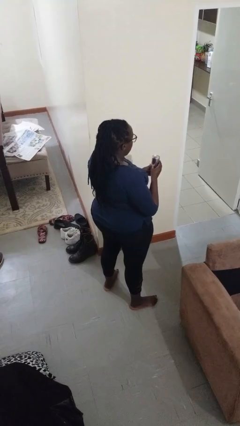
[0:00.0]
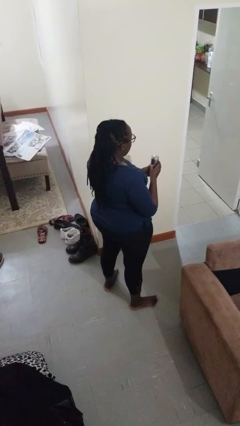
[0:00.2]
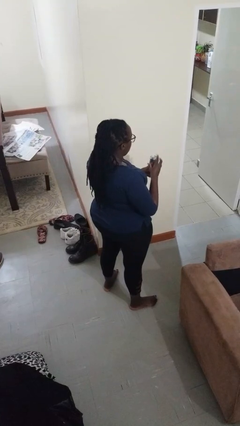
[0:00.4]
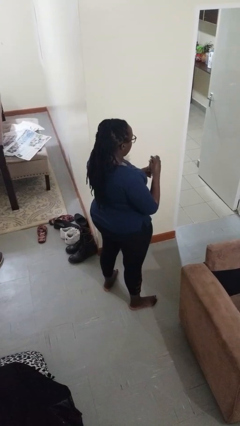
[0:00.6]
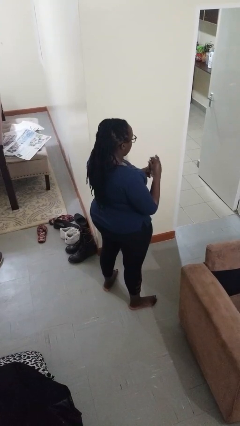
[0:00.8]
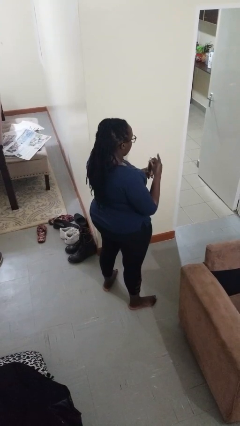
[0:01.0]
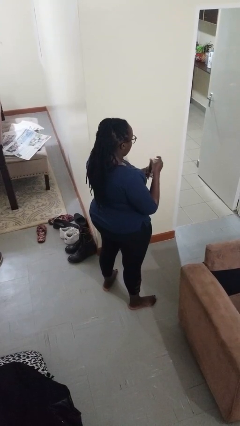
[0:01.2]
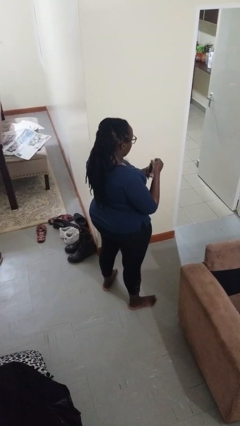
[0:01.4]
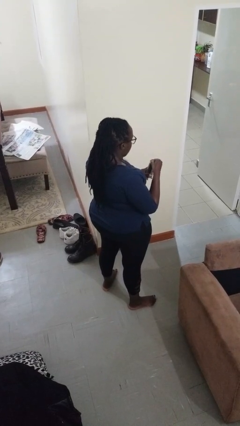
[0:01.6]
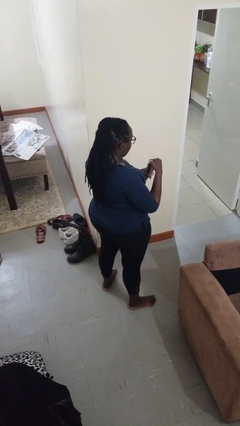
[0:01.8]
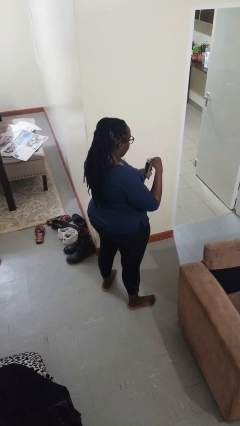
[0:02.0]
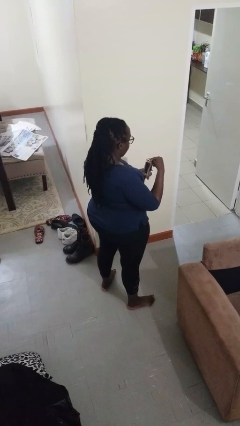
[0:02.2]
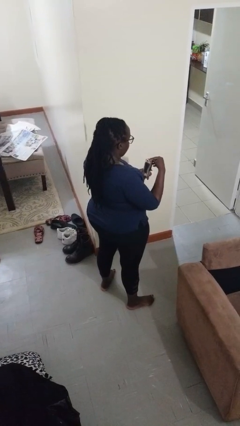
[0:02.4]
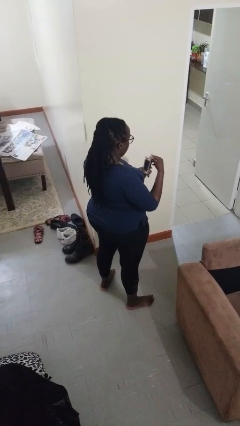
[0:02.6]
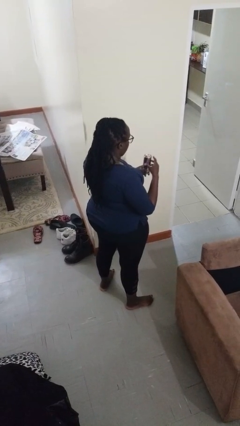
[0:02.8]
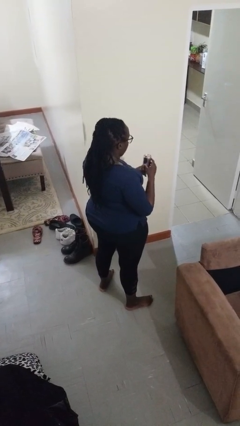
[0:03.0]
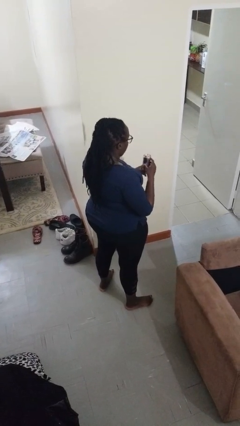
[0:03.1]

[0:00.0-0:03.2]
person opens beverage can

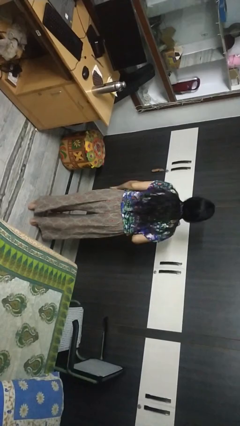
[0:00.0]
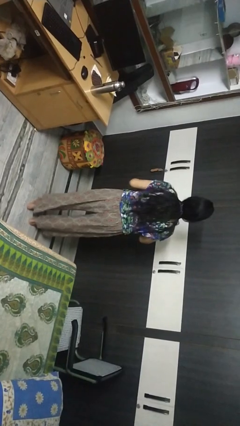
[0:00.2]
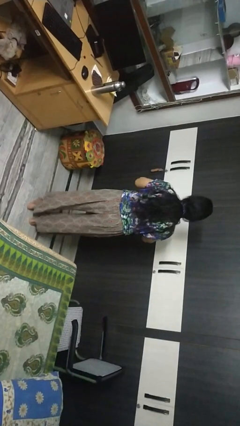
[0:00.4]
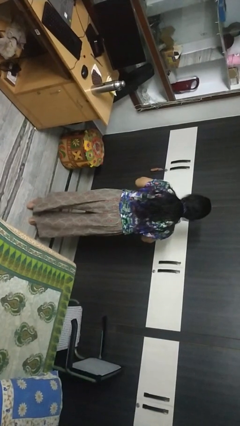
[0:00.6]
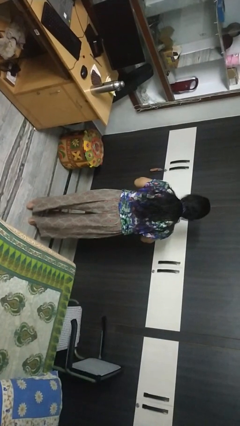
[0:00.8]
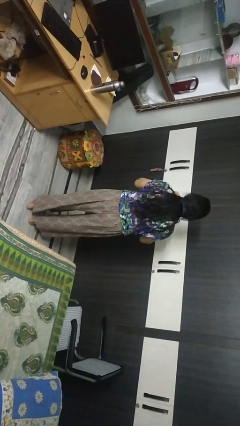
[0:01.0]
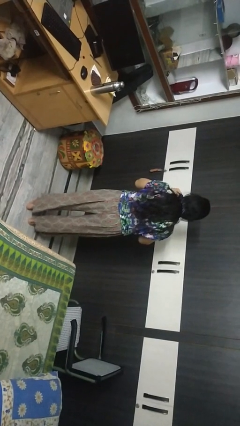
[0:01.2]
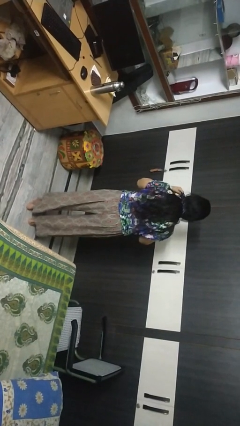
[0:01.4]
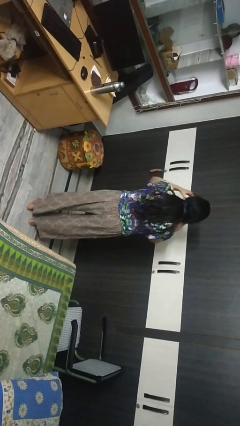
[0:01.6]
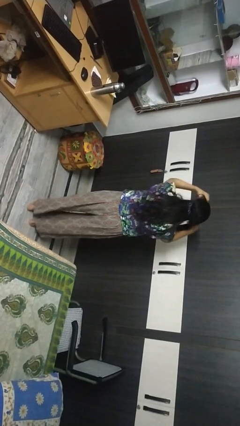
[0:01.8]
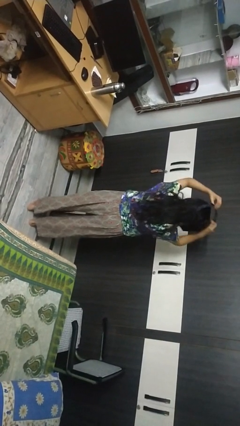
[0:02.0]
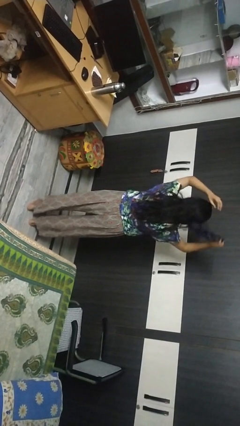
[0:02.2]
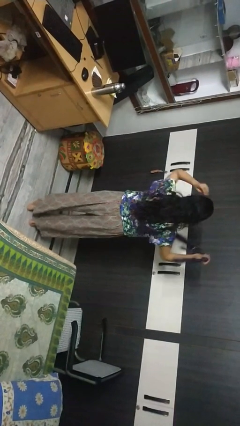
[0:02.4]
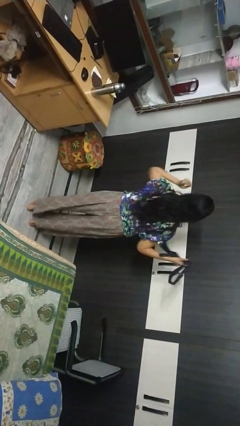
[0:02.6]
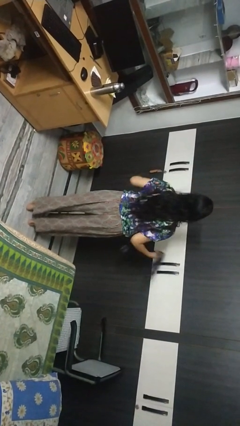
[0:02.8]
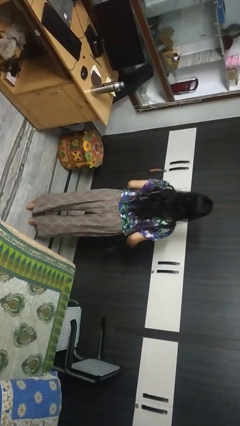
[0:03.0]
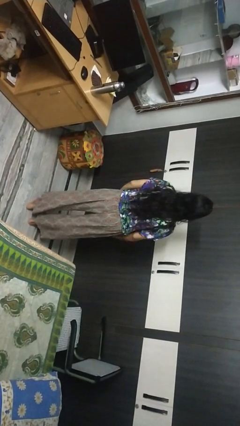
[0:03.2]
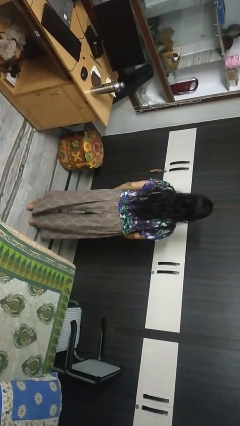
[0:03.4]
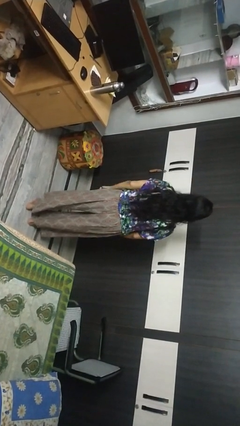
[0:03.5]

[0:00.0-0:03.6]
person takes off necktie

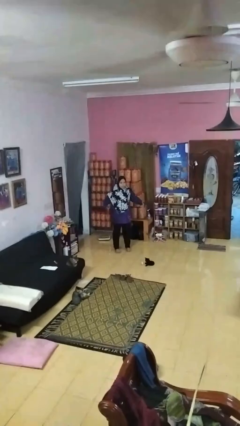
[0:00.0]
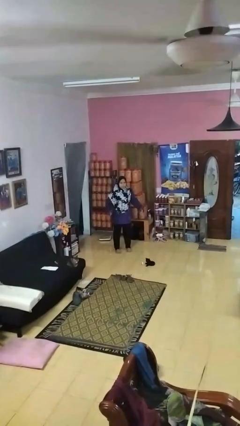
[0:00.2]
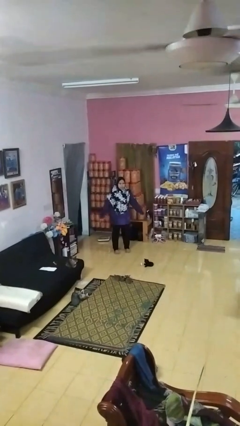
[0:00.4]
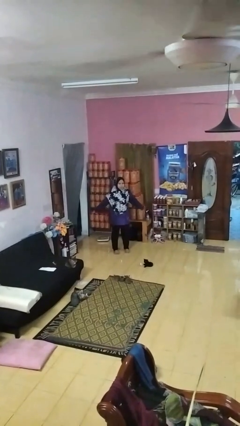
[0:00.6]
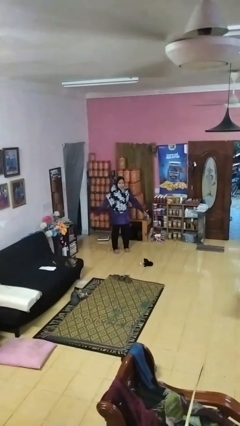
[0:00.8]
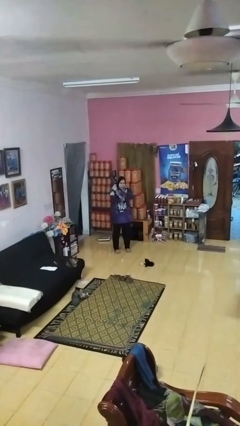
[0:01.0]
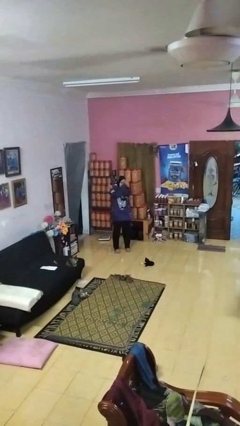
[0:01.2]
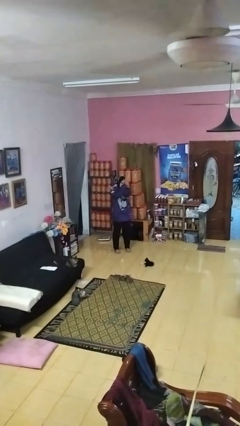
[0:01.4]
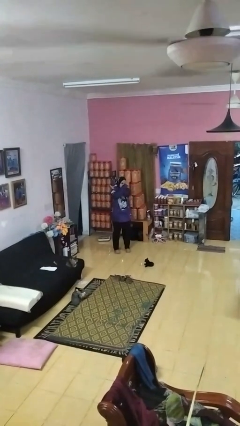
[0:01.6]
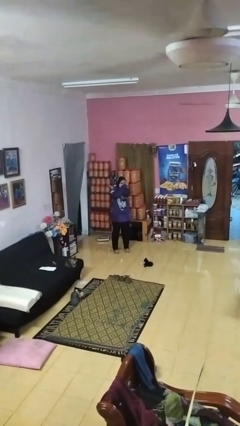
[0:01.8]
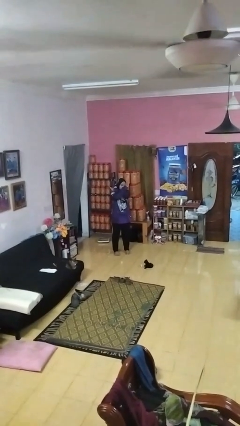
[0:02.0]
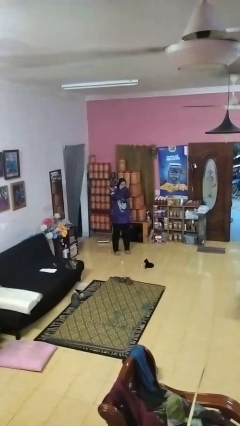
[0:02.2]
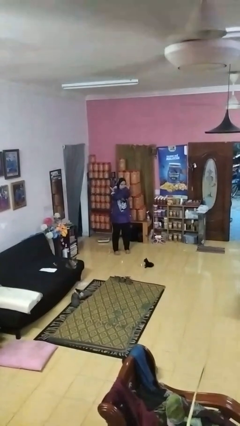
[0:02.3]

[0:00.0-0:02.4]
person gestures arms x

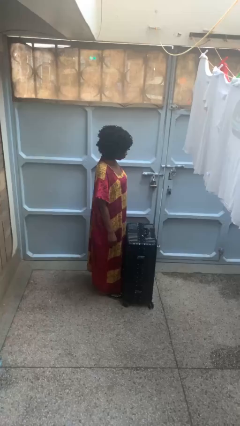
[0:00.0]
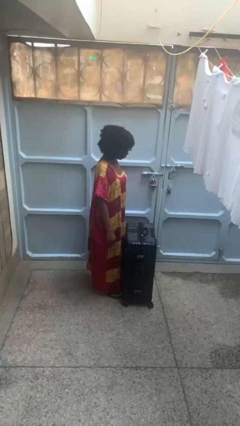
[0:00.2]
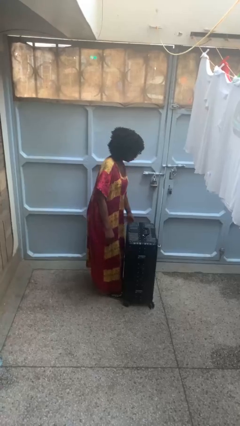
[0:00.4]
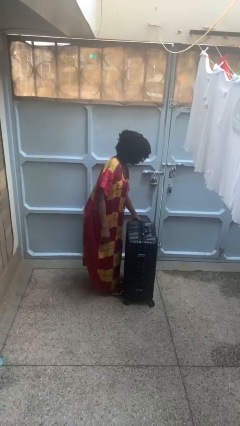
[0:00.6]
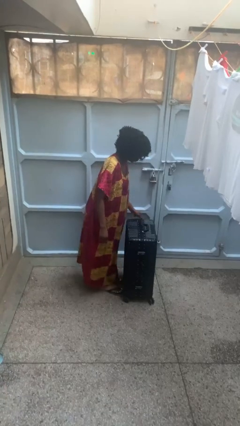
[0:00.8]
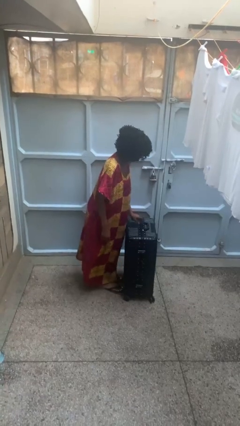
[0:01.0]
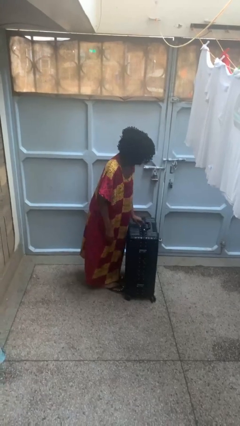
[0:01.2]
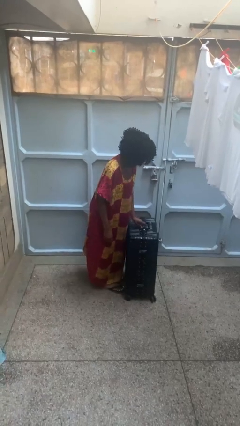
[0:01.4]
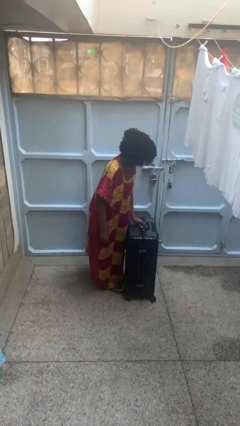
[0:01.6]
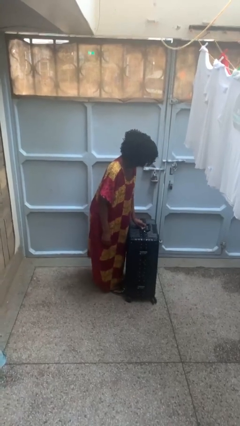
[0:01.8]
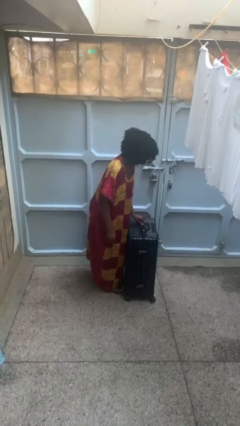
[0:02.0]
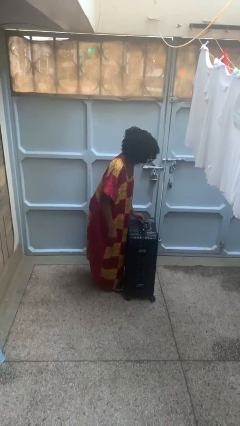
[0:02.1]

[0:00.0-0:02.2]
person opens suitcase

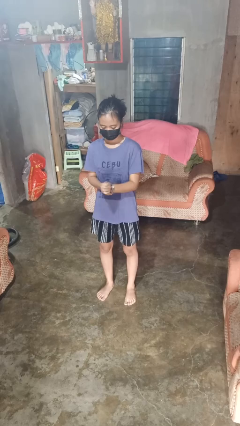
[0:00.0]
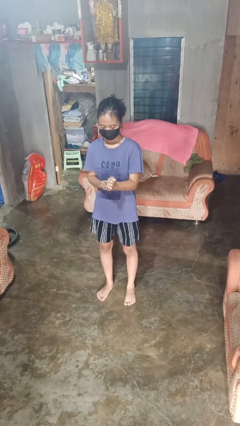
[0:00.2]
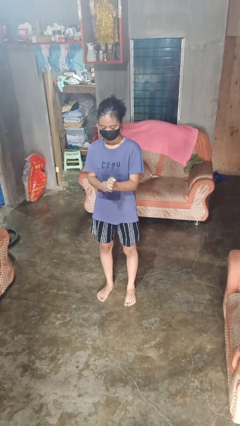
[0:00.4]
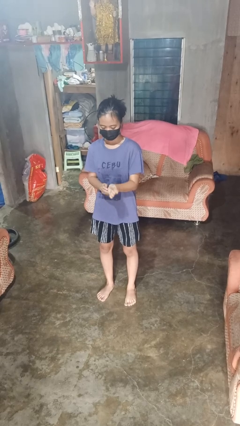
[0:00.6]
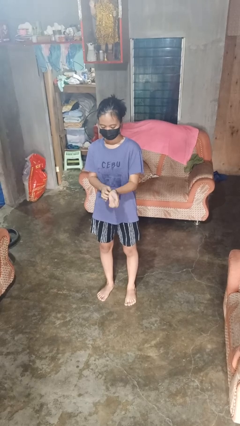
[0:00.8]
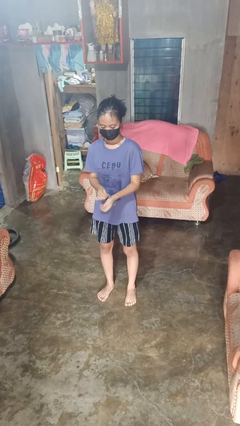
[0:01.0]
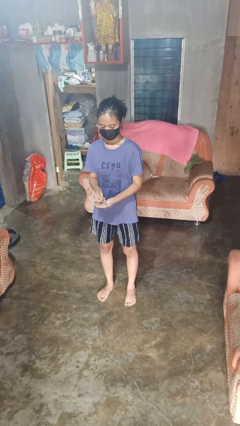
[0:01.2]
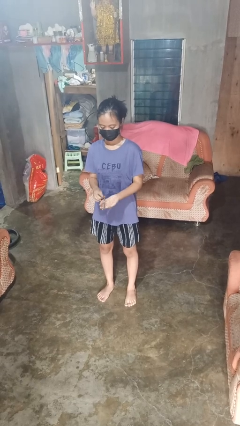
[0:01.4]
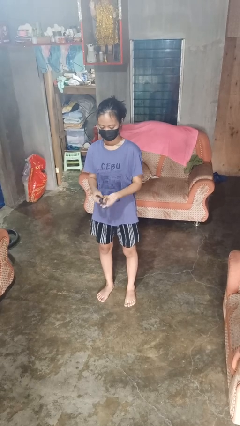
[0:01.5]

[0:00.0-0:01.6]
person takes off wristwatch

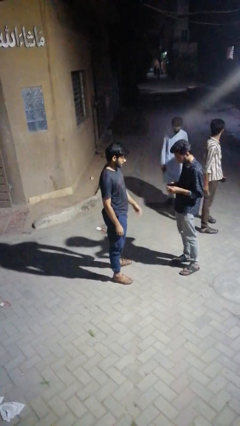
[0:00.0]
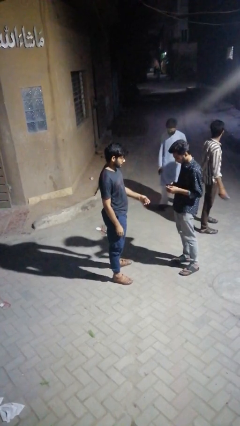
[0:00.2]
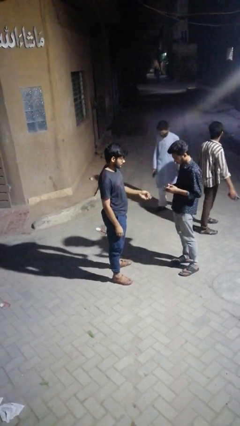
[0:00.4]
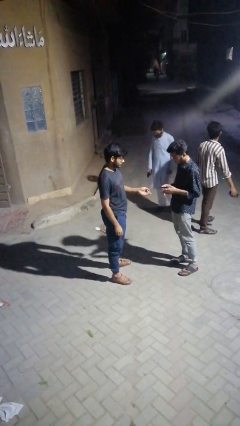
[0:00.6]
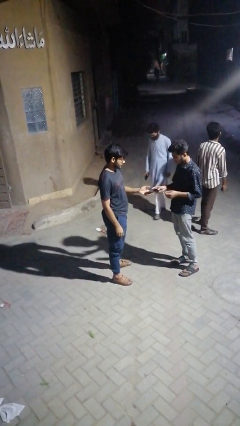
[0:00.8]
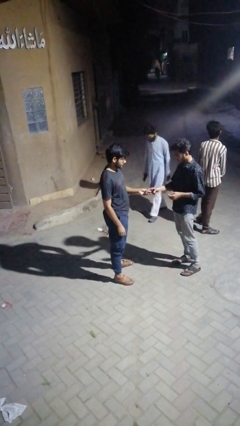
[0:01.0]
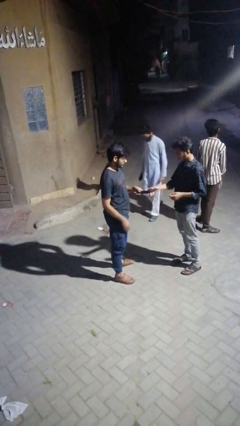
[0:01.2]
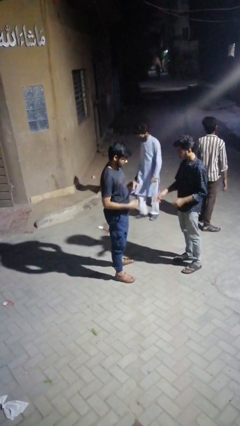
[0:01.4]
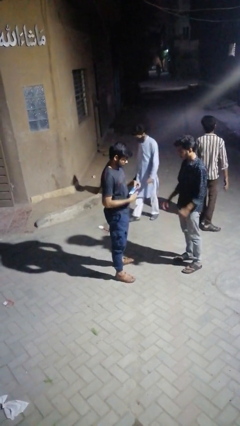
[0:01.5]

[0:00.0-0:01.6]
person transfers object to person

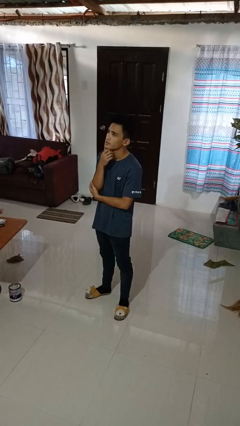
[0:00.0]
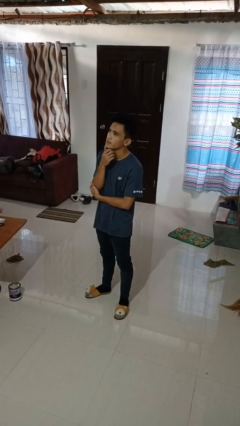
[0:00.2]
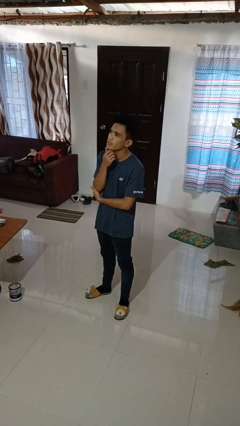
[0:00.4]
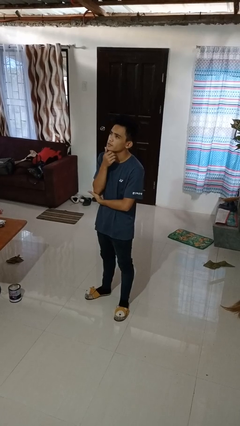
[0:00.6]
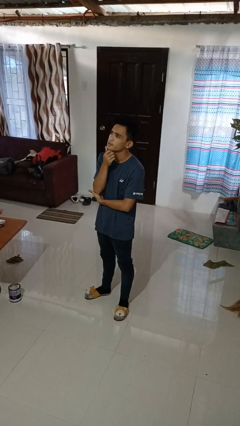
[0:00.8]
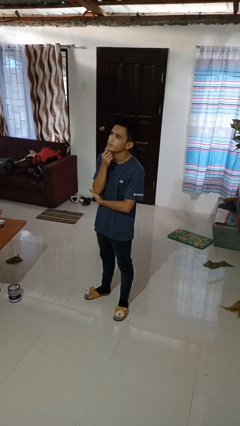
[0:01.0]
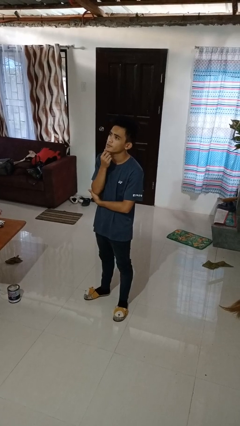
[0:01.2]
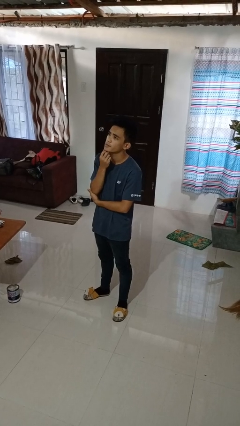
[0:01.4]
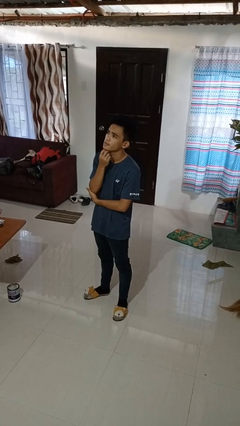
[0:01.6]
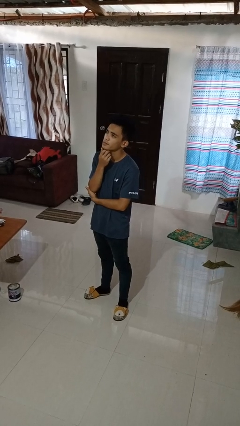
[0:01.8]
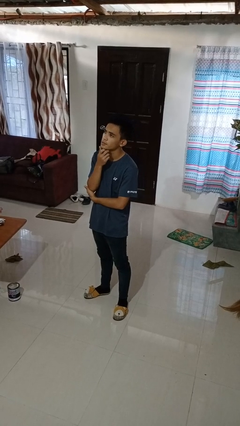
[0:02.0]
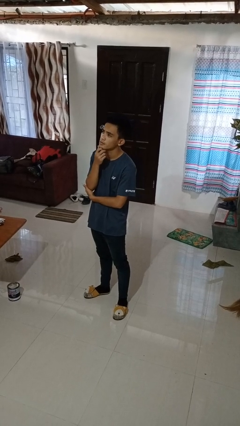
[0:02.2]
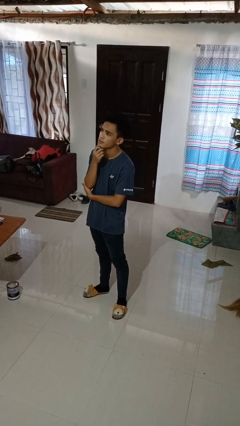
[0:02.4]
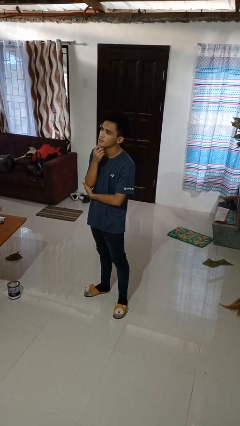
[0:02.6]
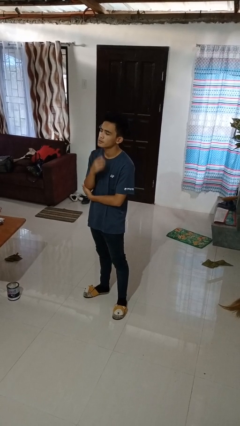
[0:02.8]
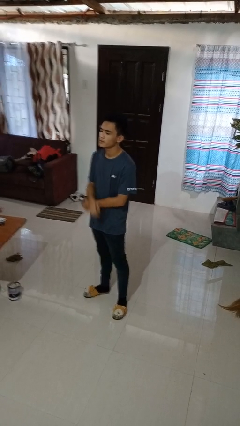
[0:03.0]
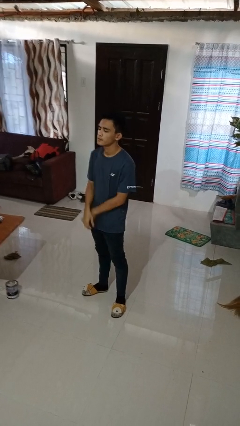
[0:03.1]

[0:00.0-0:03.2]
person strokes chin
